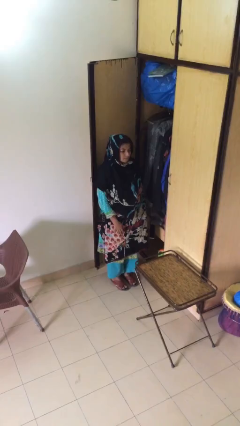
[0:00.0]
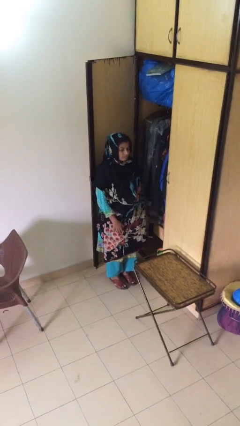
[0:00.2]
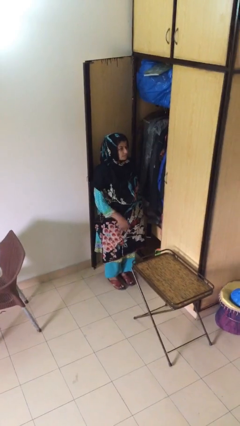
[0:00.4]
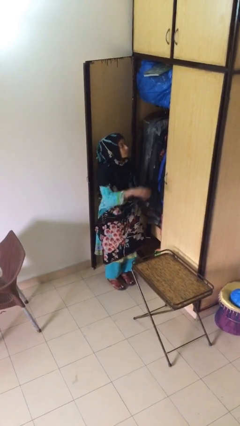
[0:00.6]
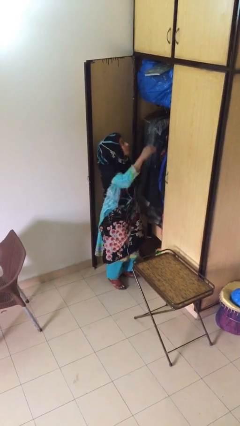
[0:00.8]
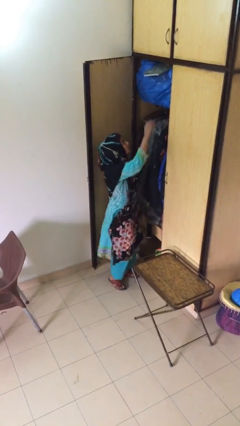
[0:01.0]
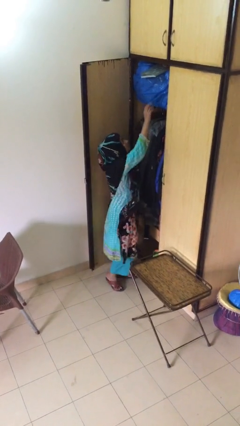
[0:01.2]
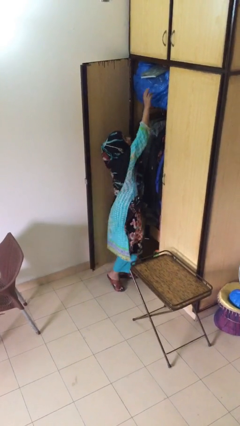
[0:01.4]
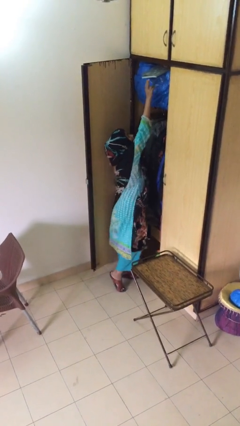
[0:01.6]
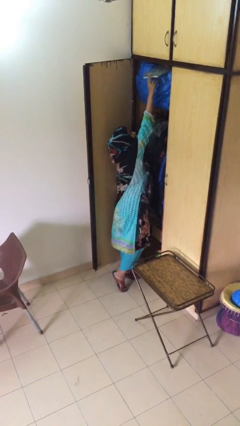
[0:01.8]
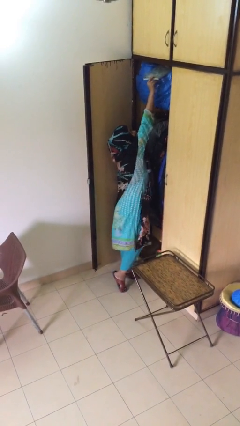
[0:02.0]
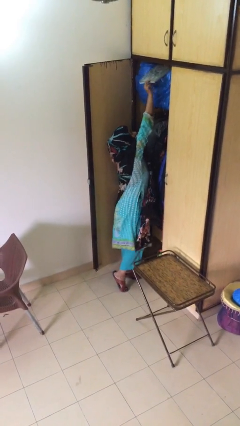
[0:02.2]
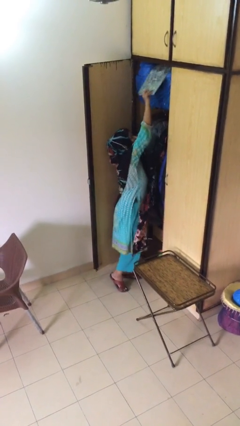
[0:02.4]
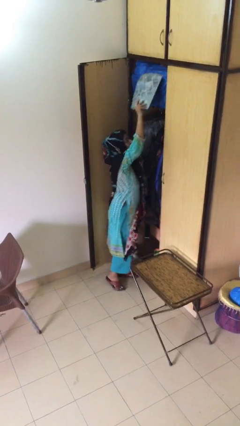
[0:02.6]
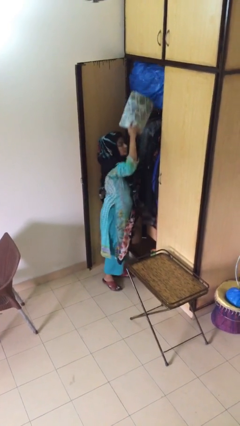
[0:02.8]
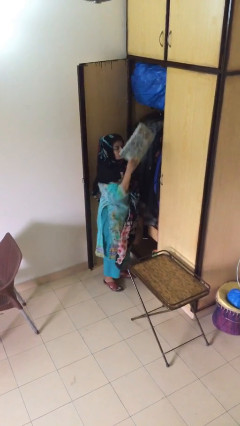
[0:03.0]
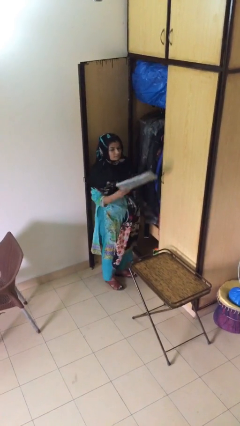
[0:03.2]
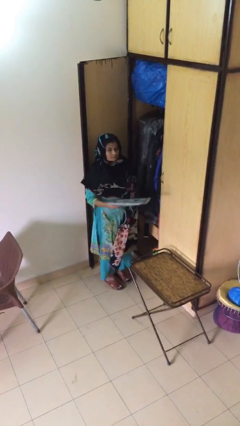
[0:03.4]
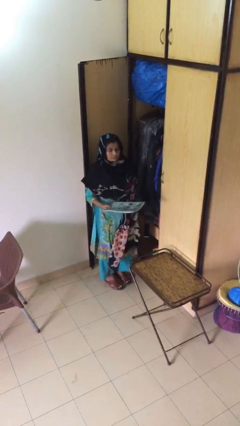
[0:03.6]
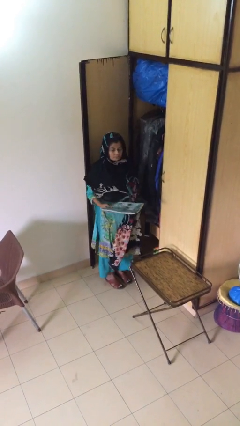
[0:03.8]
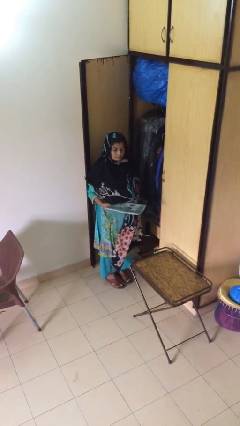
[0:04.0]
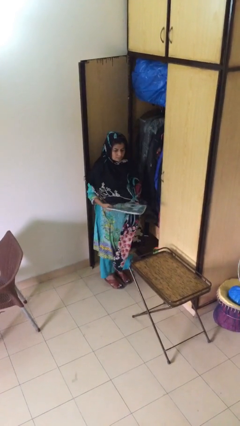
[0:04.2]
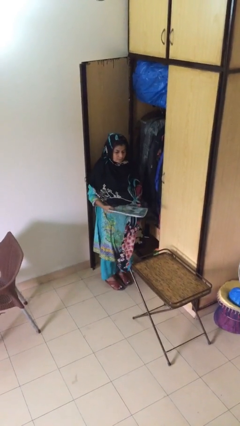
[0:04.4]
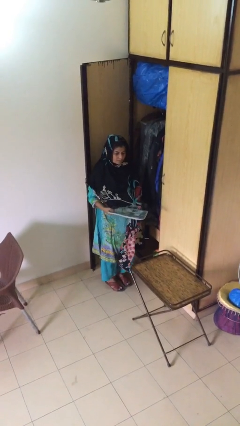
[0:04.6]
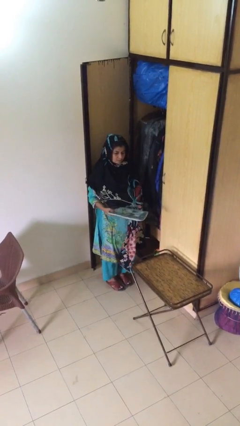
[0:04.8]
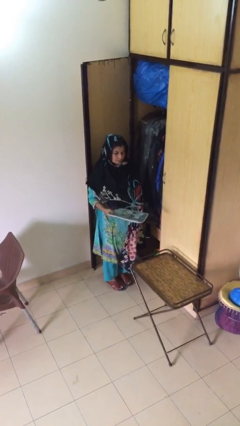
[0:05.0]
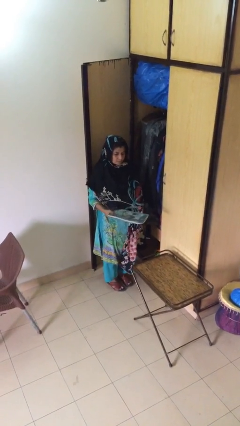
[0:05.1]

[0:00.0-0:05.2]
person picks up object from shelf

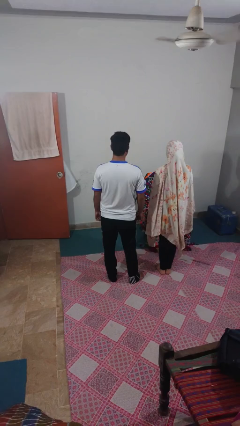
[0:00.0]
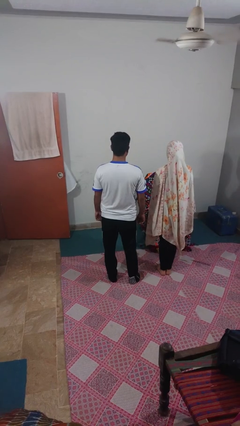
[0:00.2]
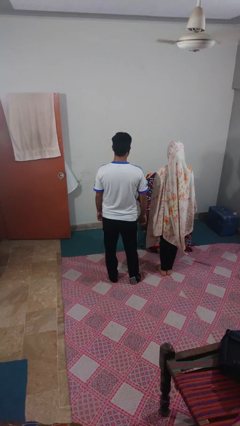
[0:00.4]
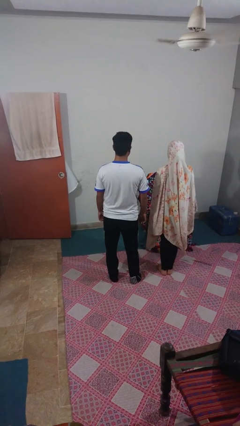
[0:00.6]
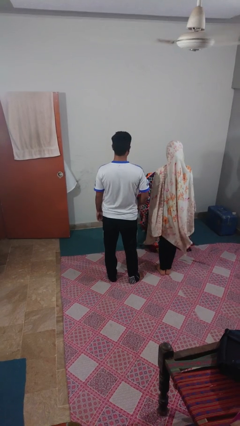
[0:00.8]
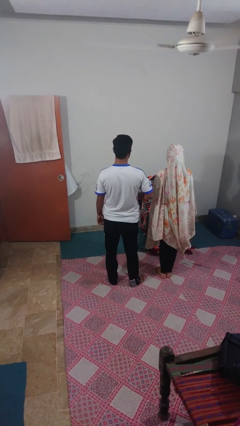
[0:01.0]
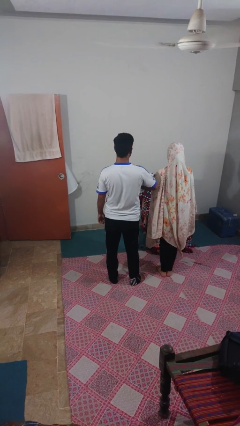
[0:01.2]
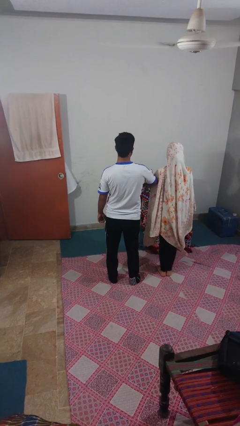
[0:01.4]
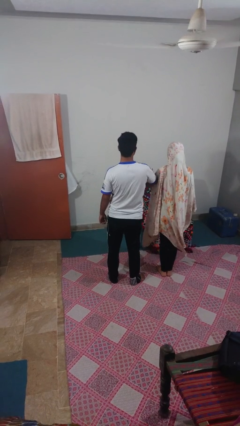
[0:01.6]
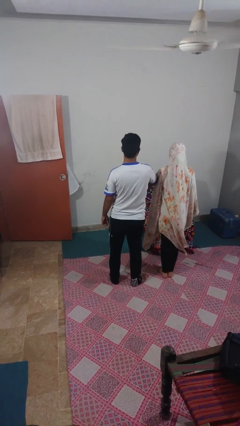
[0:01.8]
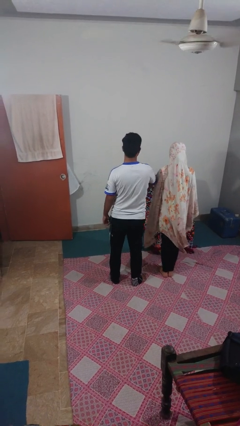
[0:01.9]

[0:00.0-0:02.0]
person nudges person with elbow

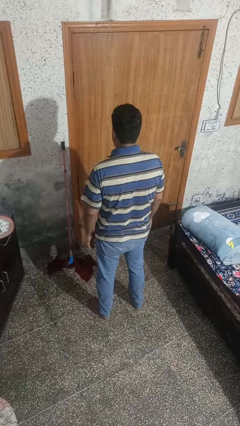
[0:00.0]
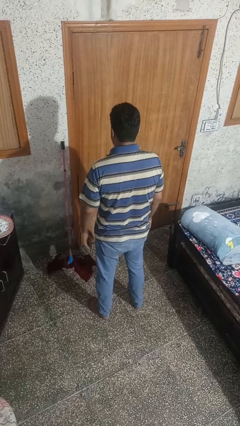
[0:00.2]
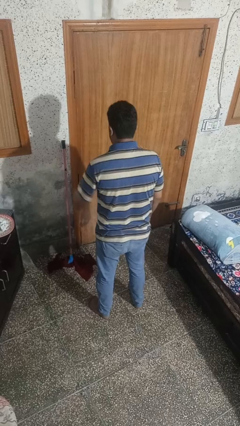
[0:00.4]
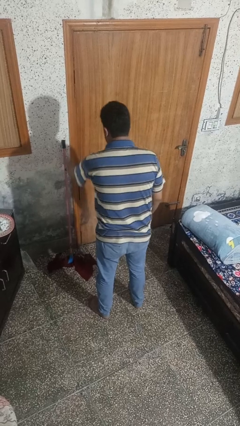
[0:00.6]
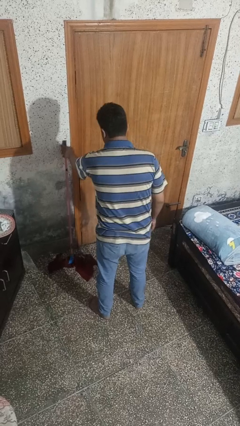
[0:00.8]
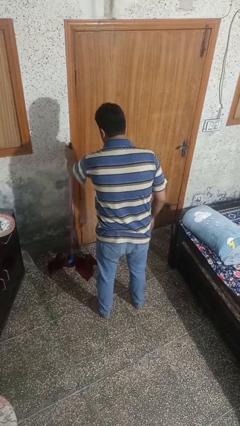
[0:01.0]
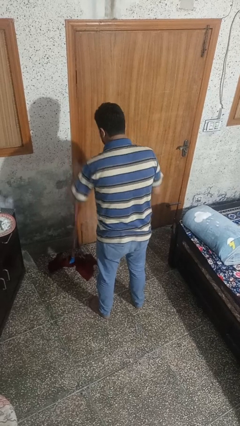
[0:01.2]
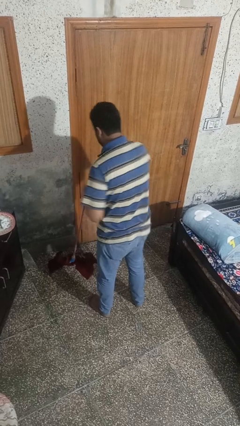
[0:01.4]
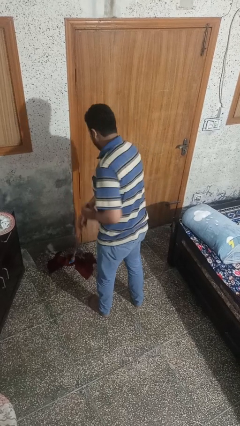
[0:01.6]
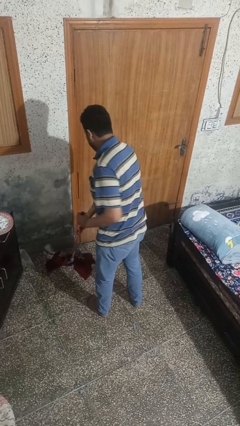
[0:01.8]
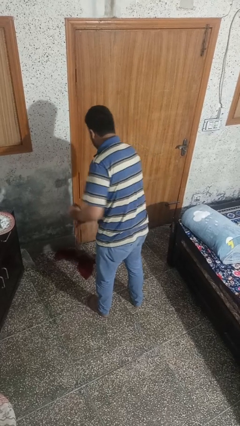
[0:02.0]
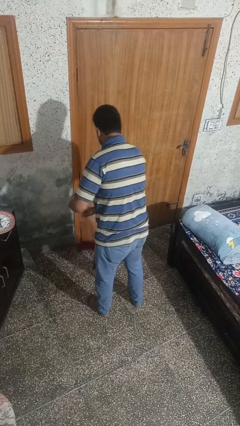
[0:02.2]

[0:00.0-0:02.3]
person mops

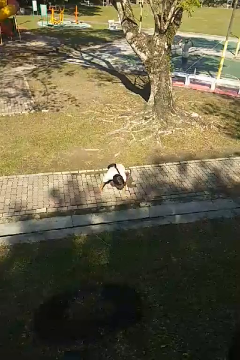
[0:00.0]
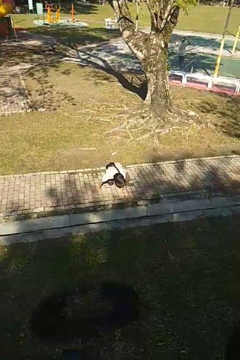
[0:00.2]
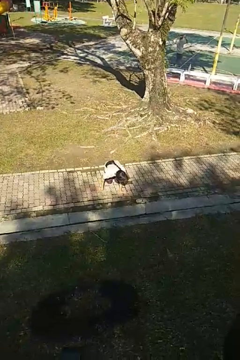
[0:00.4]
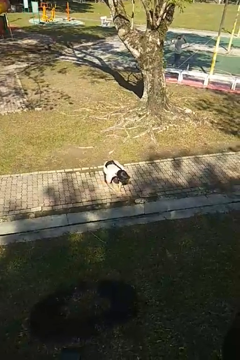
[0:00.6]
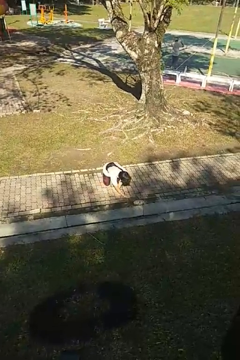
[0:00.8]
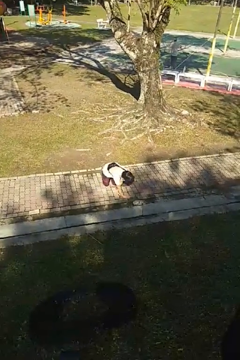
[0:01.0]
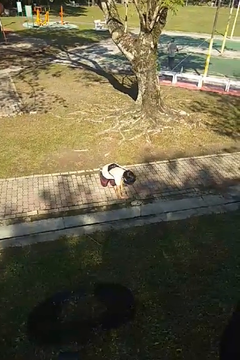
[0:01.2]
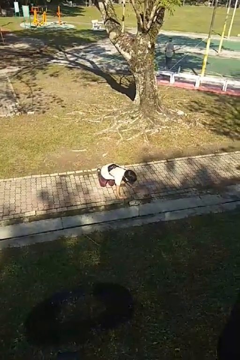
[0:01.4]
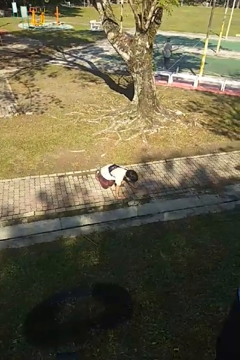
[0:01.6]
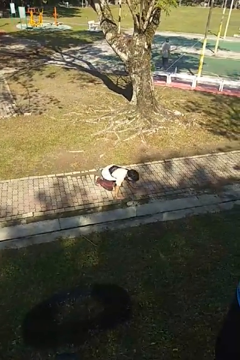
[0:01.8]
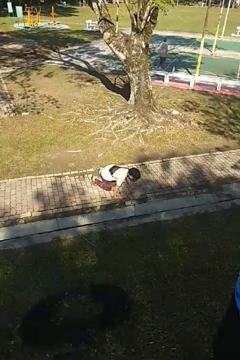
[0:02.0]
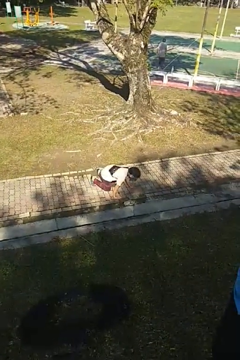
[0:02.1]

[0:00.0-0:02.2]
person crawls

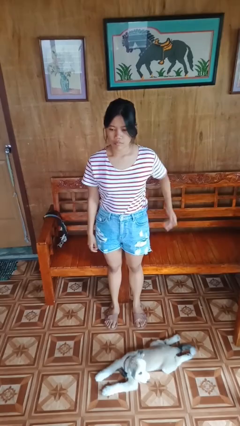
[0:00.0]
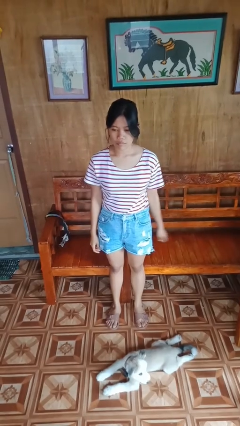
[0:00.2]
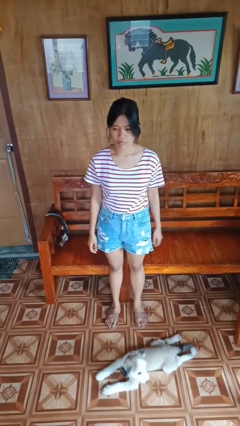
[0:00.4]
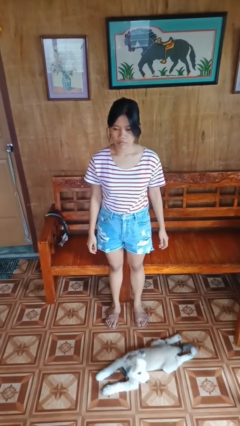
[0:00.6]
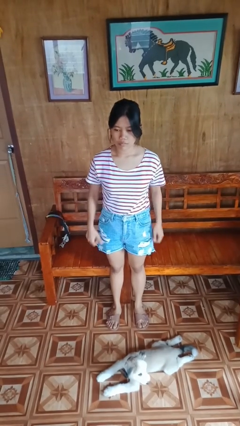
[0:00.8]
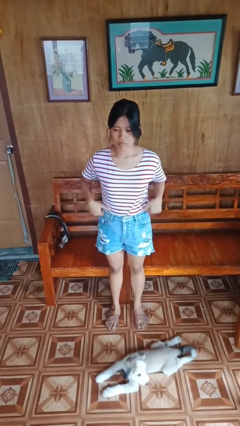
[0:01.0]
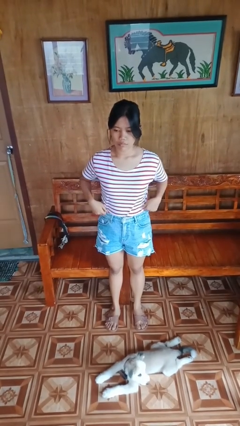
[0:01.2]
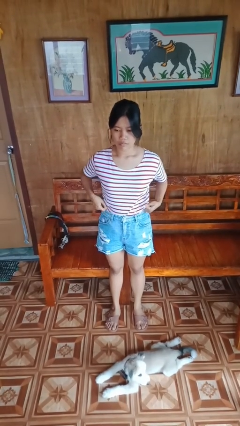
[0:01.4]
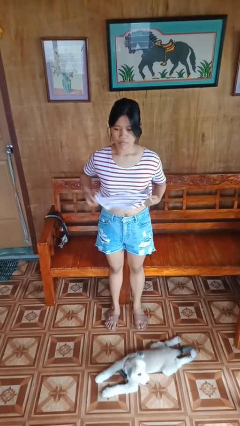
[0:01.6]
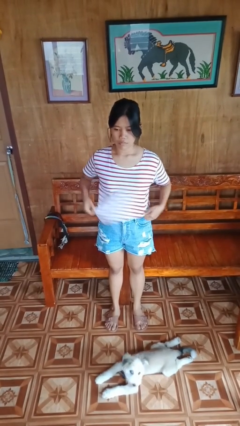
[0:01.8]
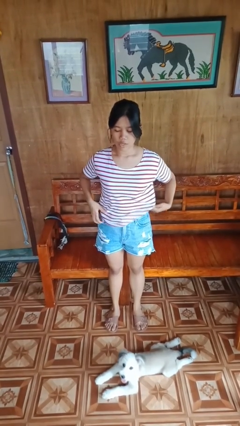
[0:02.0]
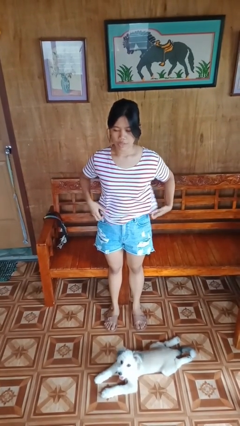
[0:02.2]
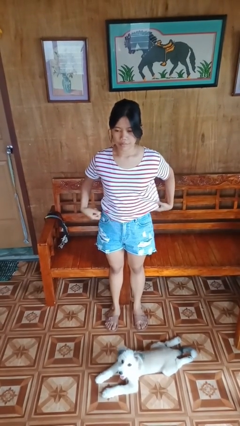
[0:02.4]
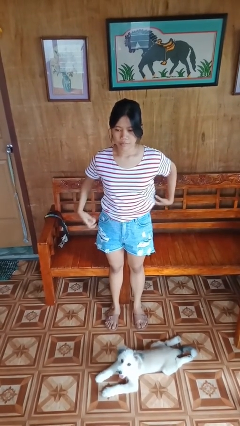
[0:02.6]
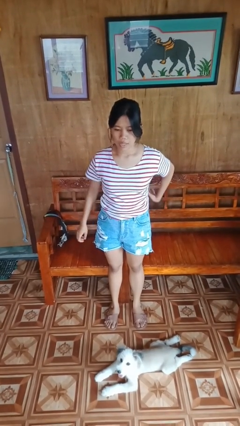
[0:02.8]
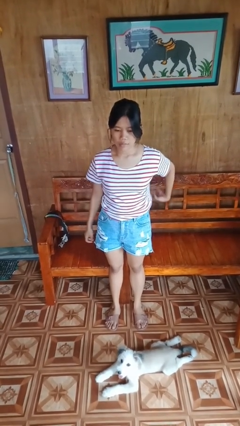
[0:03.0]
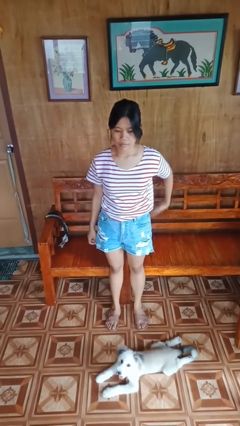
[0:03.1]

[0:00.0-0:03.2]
person untucks shirt

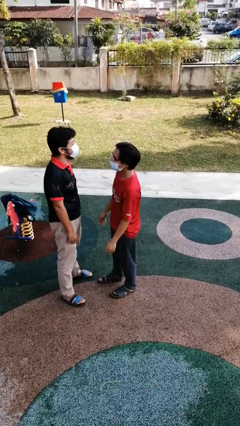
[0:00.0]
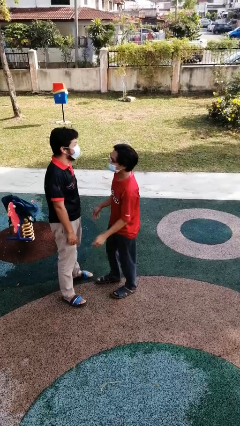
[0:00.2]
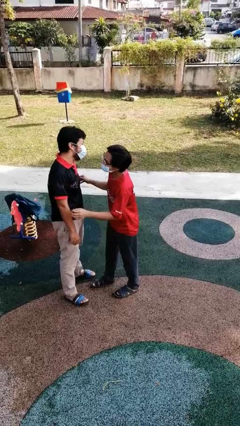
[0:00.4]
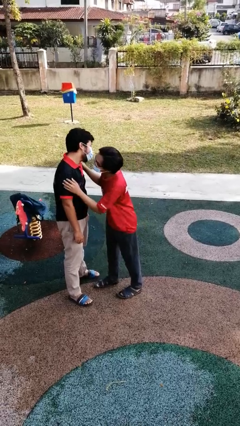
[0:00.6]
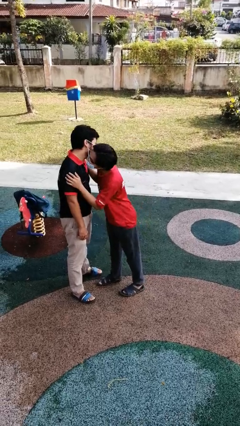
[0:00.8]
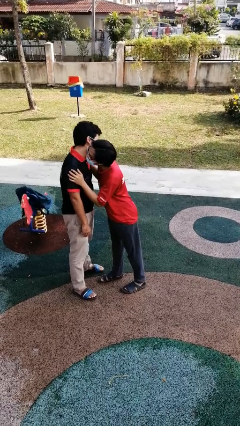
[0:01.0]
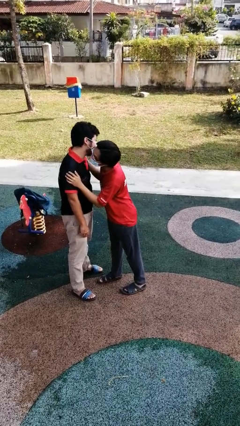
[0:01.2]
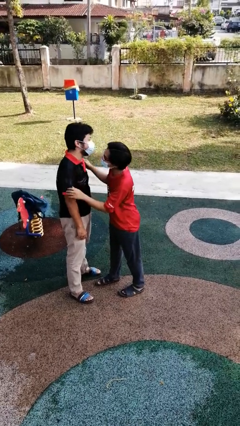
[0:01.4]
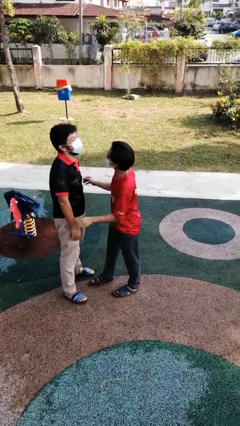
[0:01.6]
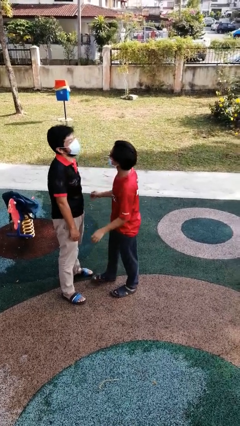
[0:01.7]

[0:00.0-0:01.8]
person kisses cheek of person

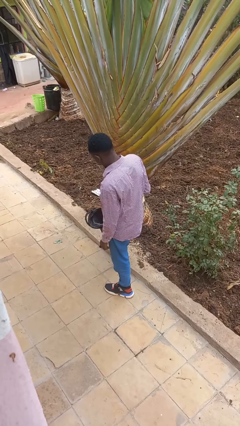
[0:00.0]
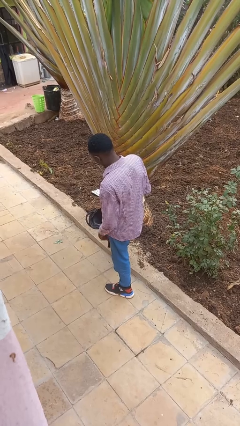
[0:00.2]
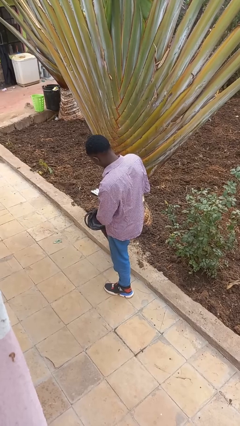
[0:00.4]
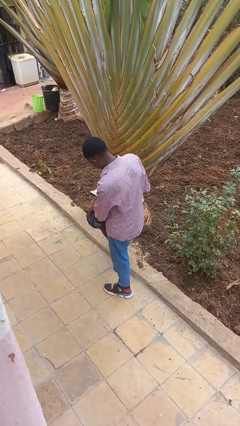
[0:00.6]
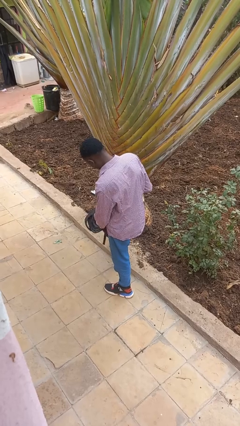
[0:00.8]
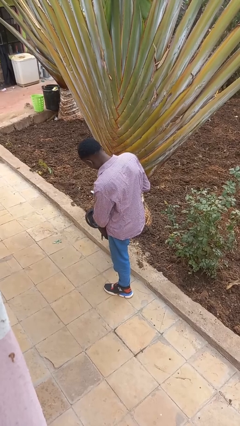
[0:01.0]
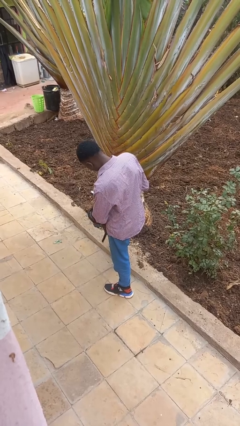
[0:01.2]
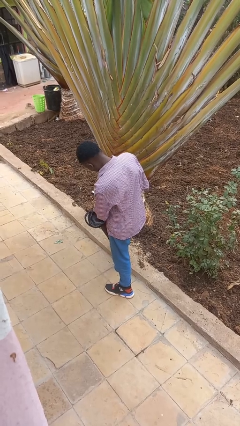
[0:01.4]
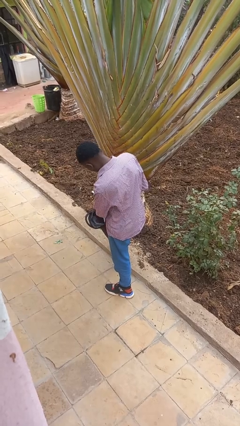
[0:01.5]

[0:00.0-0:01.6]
person searches in backpack
